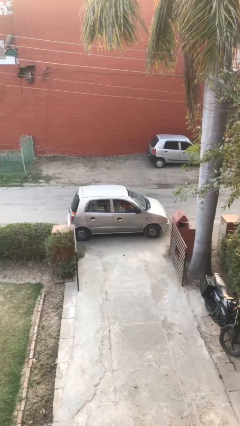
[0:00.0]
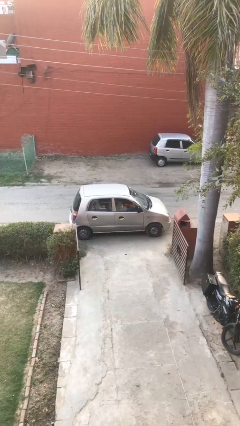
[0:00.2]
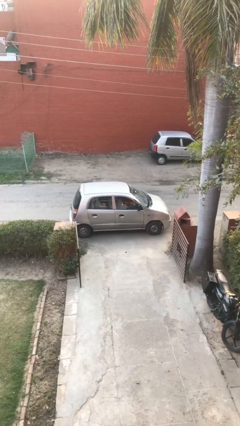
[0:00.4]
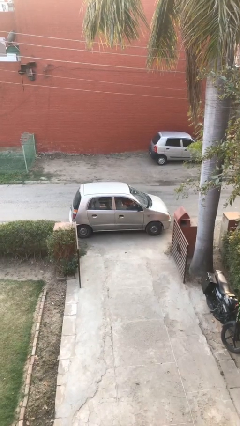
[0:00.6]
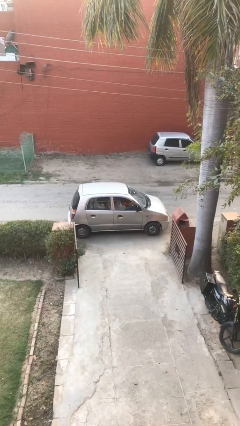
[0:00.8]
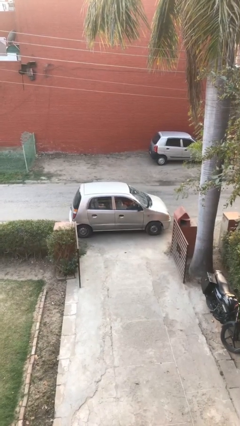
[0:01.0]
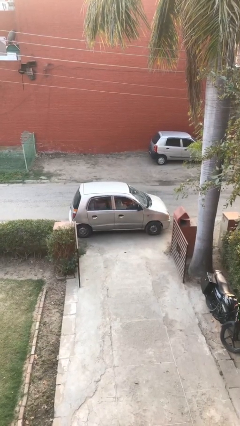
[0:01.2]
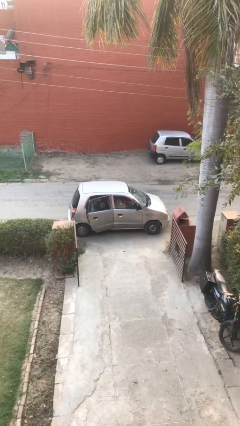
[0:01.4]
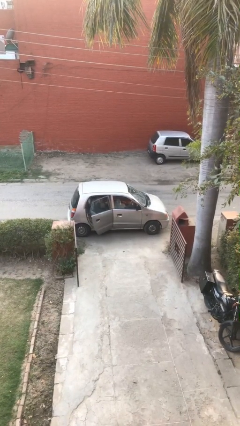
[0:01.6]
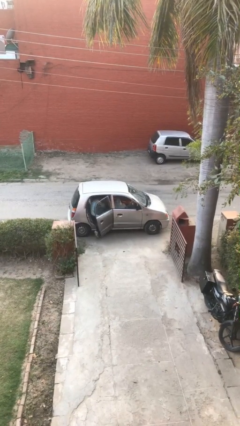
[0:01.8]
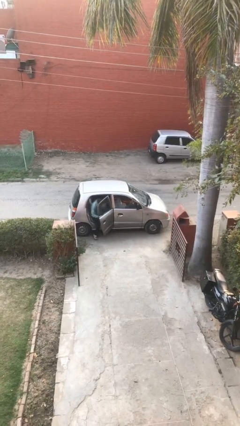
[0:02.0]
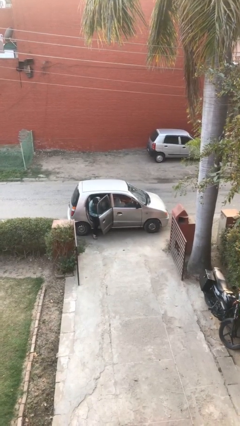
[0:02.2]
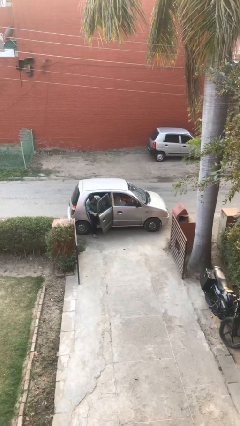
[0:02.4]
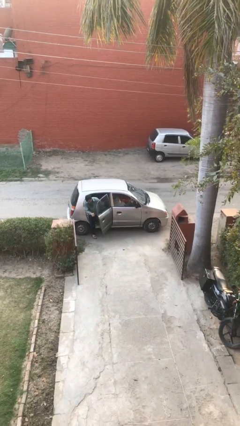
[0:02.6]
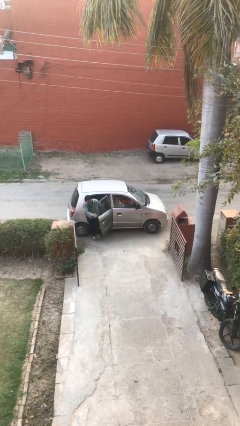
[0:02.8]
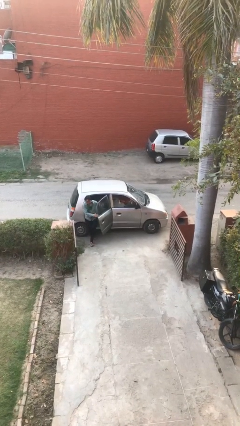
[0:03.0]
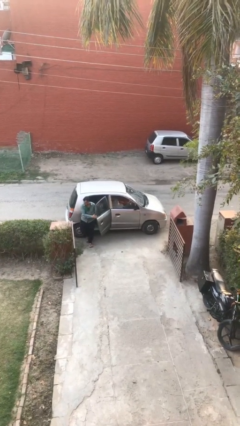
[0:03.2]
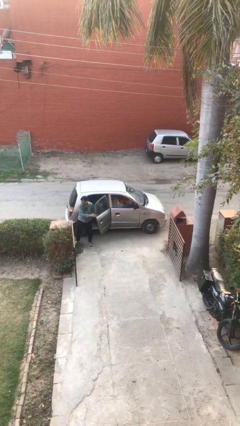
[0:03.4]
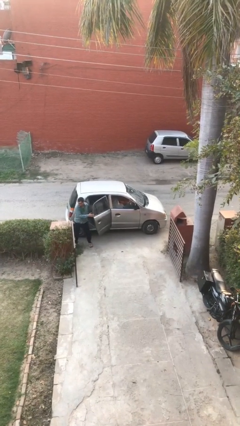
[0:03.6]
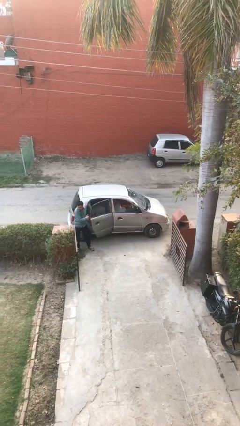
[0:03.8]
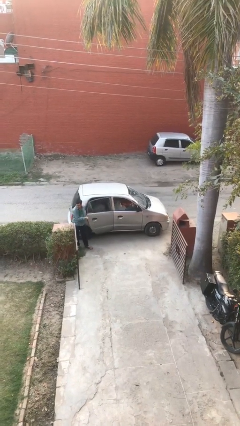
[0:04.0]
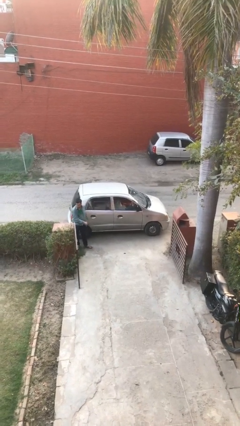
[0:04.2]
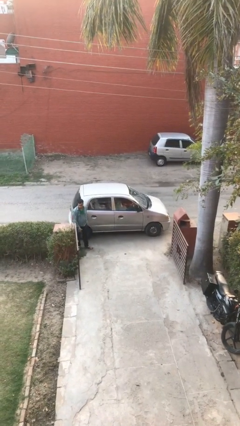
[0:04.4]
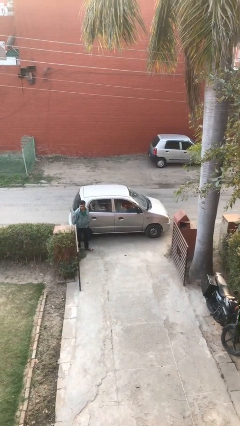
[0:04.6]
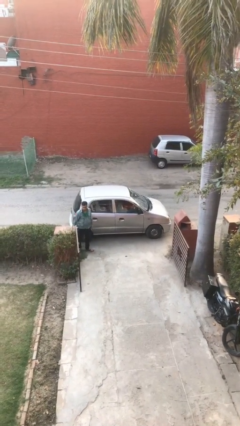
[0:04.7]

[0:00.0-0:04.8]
car drops off person

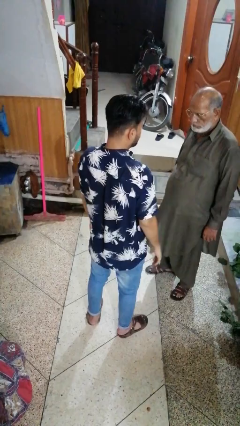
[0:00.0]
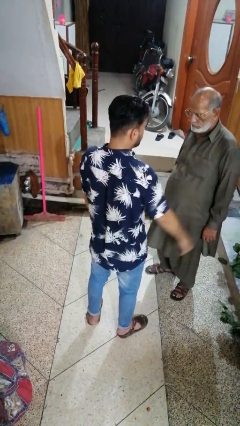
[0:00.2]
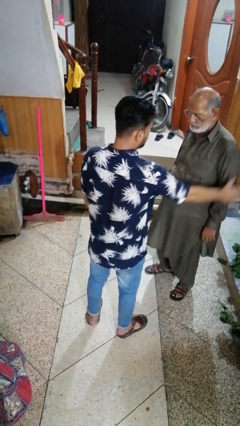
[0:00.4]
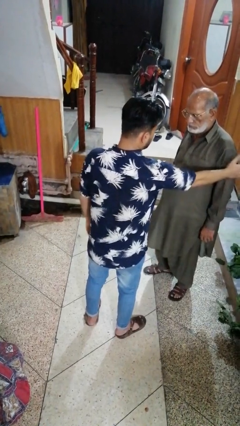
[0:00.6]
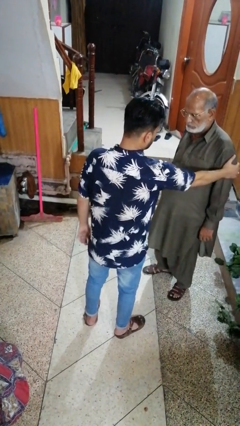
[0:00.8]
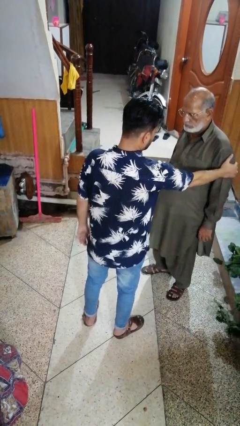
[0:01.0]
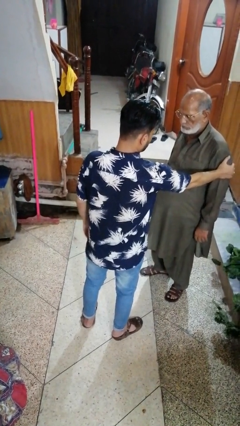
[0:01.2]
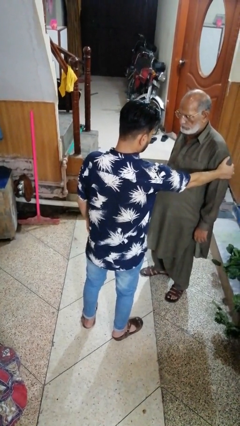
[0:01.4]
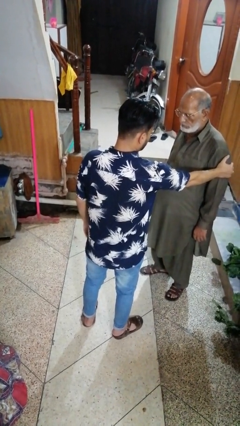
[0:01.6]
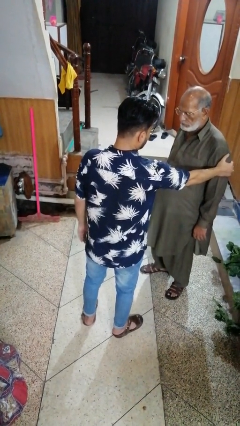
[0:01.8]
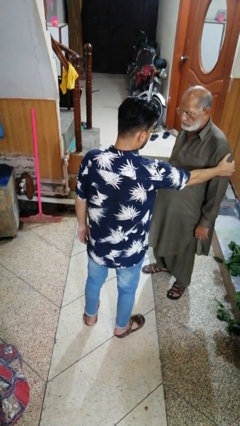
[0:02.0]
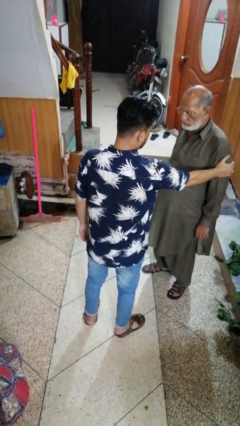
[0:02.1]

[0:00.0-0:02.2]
person grabs person by bicep

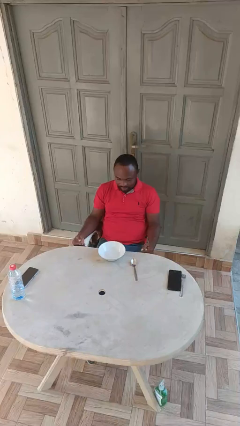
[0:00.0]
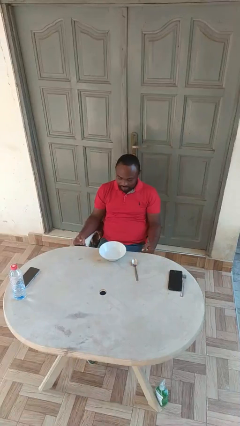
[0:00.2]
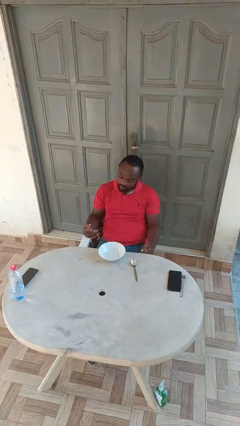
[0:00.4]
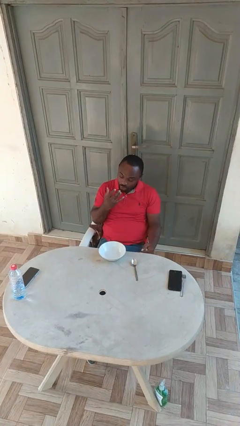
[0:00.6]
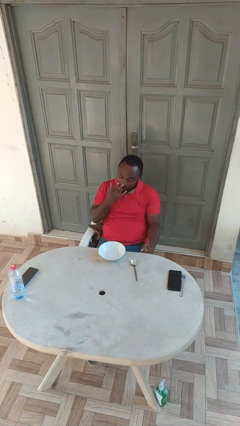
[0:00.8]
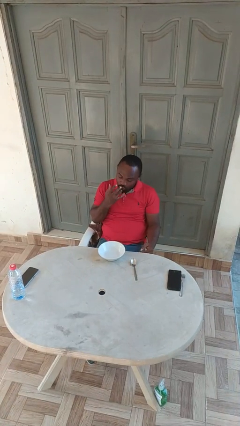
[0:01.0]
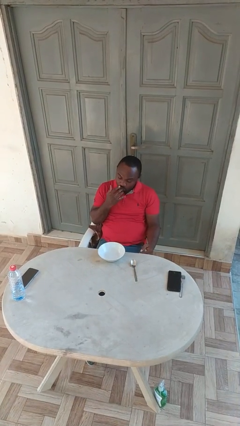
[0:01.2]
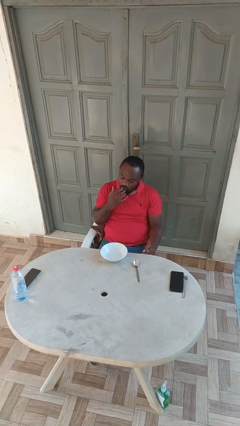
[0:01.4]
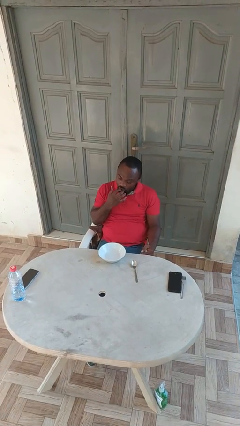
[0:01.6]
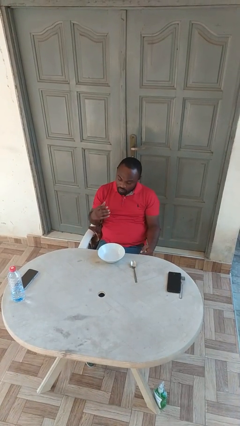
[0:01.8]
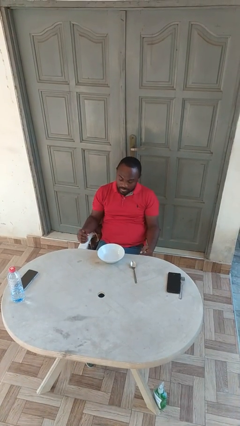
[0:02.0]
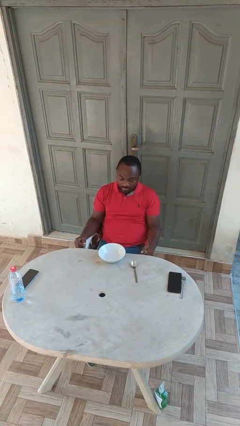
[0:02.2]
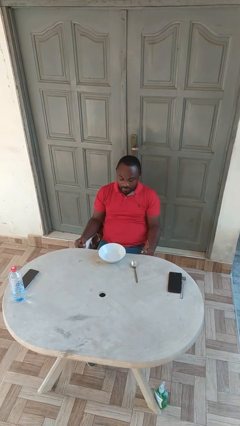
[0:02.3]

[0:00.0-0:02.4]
person licks fingers

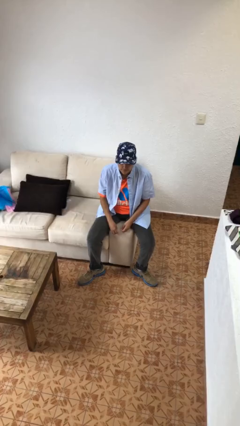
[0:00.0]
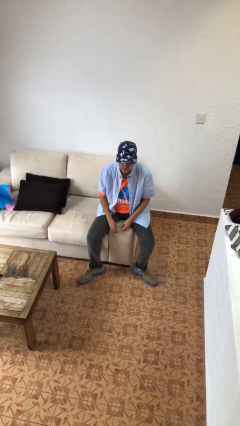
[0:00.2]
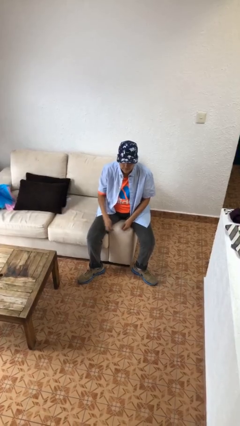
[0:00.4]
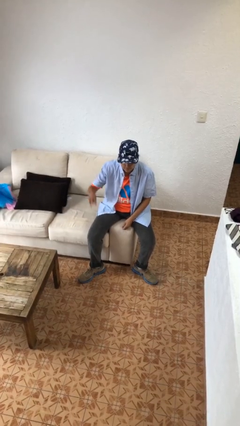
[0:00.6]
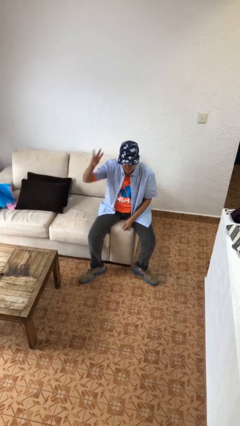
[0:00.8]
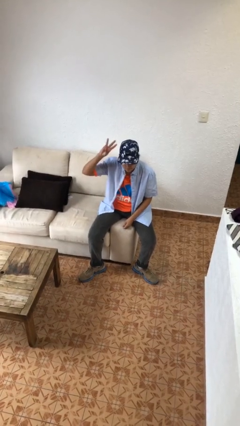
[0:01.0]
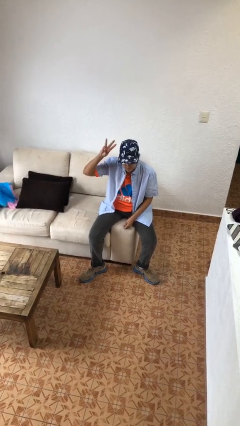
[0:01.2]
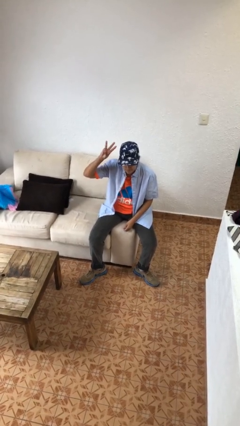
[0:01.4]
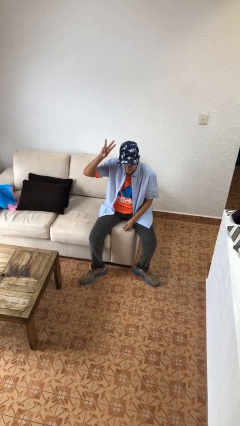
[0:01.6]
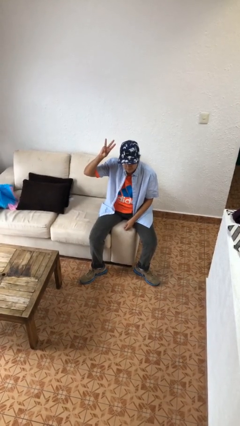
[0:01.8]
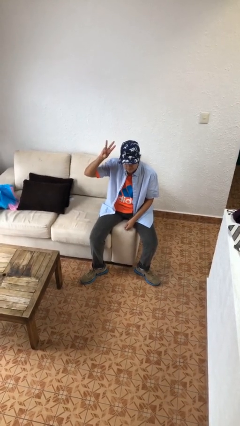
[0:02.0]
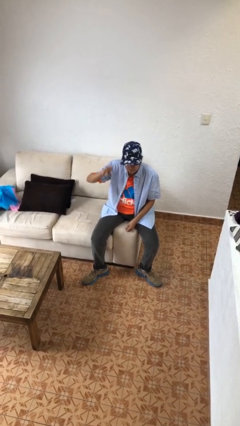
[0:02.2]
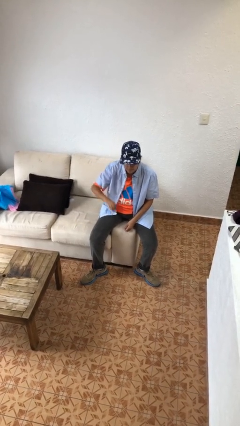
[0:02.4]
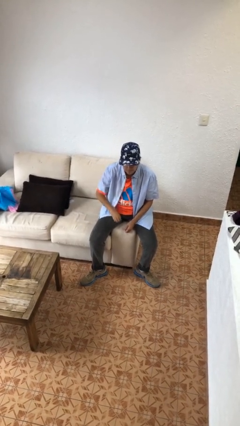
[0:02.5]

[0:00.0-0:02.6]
person gestures number three

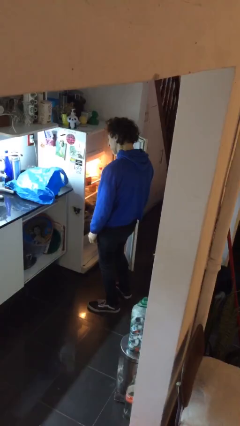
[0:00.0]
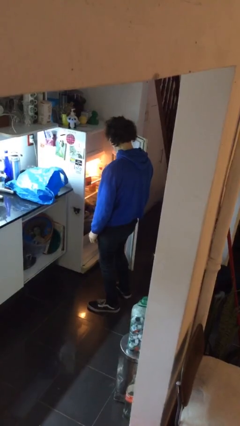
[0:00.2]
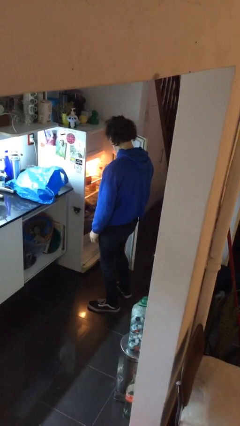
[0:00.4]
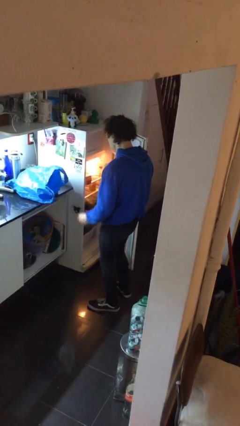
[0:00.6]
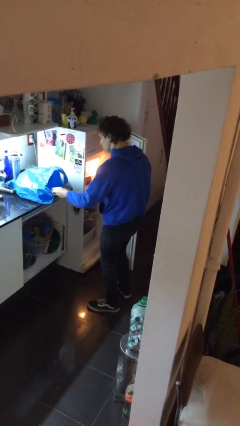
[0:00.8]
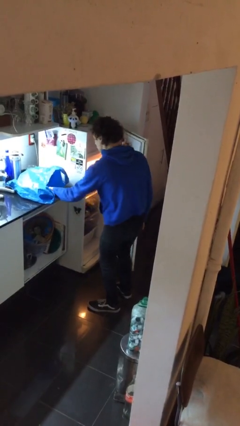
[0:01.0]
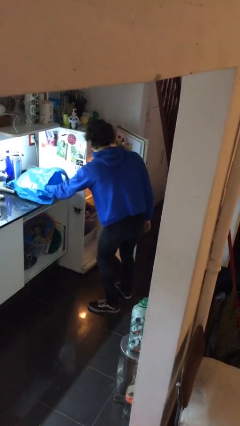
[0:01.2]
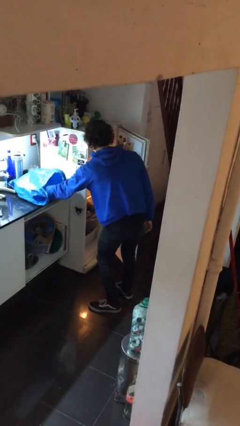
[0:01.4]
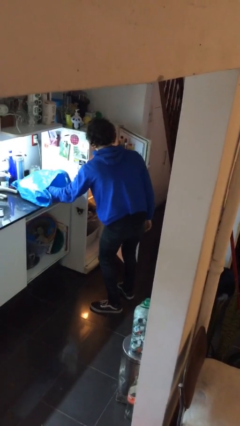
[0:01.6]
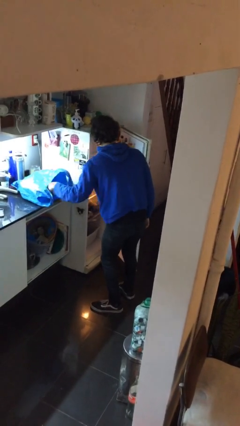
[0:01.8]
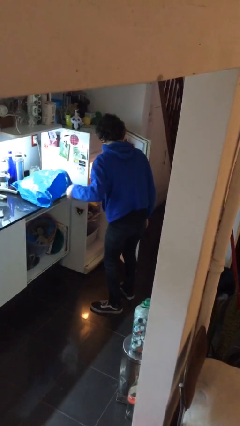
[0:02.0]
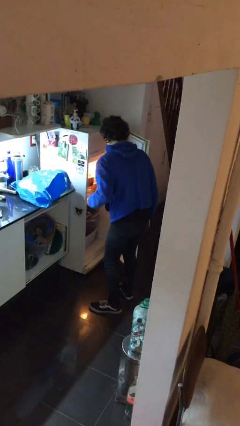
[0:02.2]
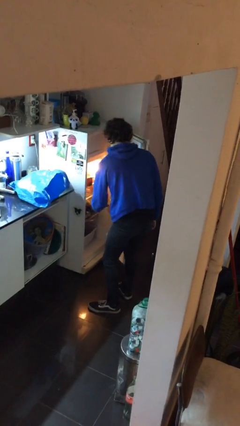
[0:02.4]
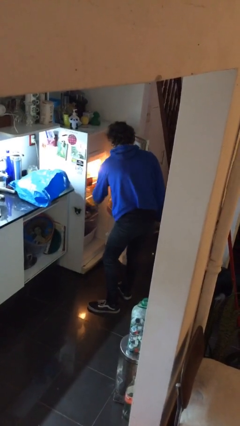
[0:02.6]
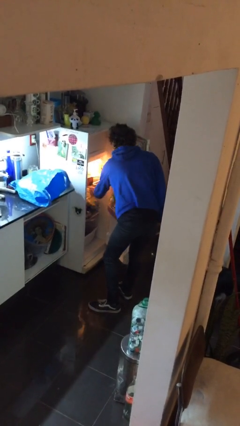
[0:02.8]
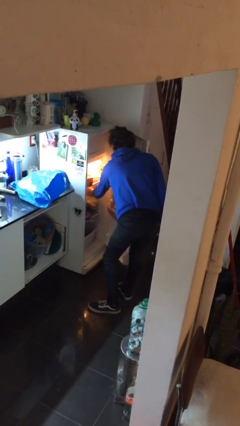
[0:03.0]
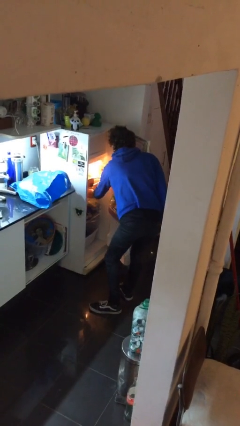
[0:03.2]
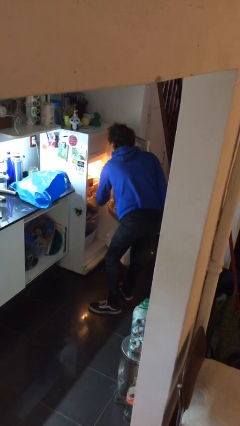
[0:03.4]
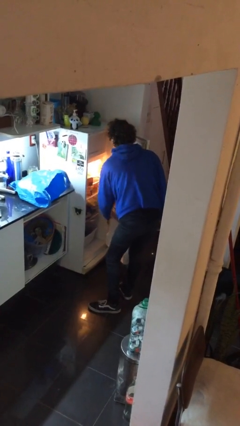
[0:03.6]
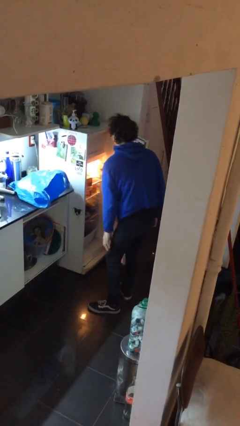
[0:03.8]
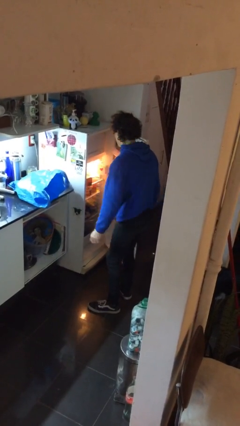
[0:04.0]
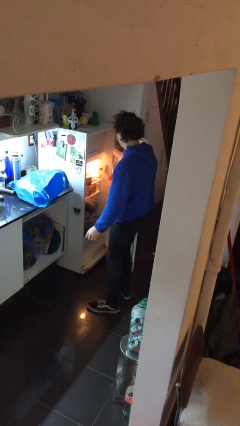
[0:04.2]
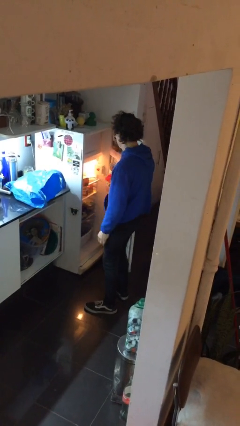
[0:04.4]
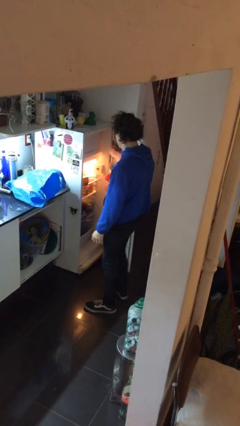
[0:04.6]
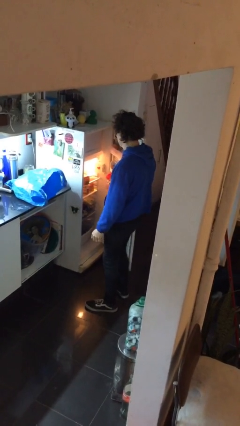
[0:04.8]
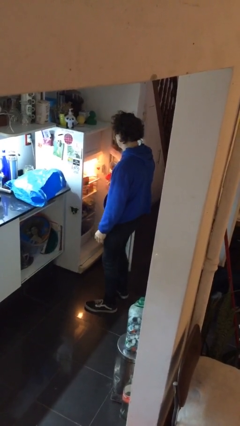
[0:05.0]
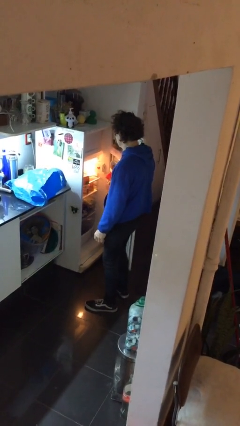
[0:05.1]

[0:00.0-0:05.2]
person loads groceries into refrigerator

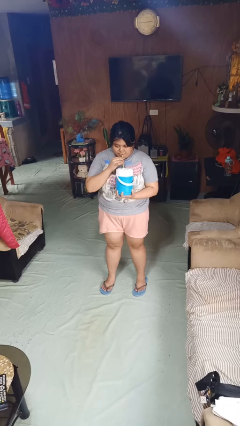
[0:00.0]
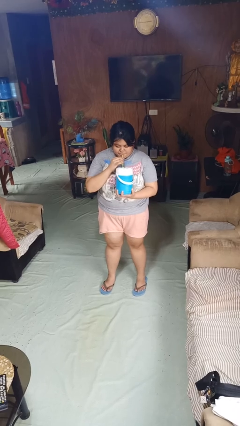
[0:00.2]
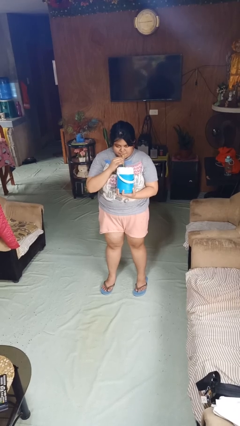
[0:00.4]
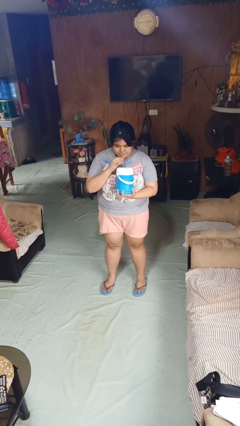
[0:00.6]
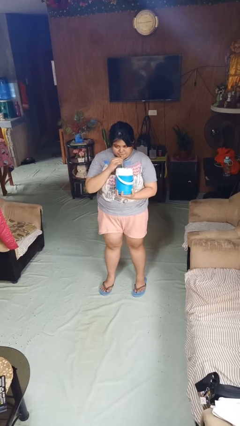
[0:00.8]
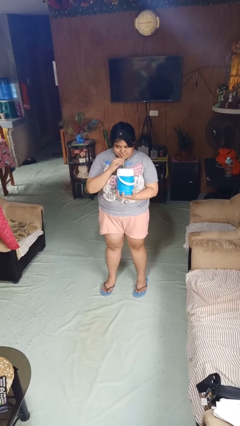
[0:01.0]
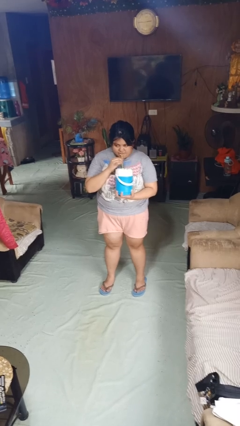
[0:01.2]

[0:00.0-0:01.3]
person drinks from straw
